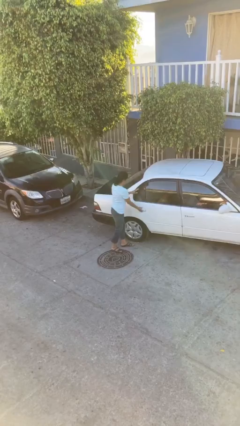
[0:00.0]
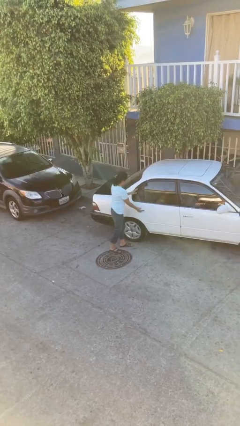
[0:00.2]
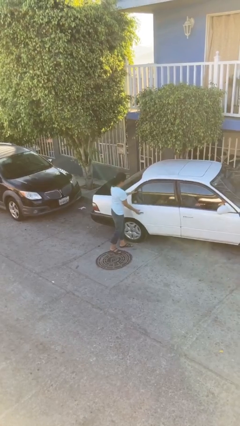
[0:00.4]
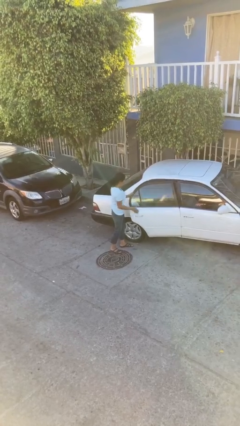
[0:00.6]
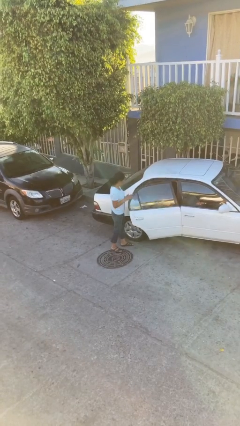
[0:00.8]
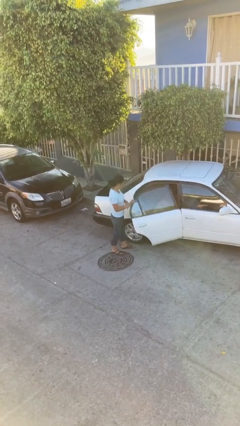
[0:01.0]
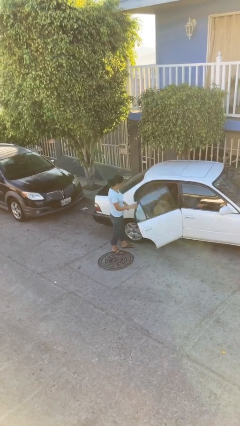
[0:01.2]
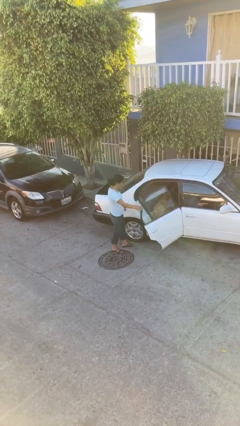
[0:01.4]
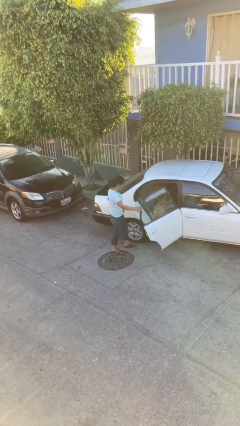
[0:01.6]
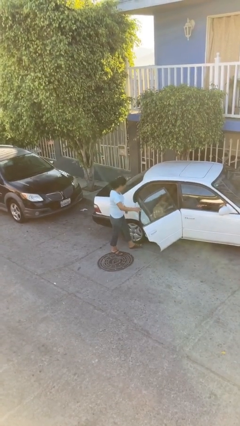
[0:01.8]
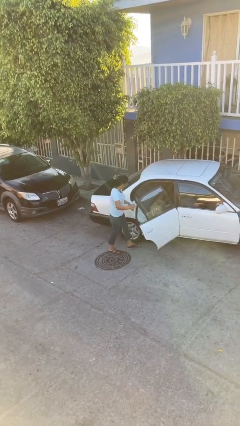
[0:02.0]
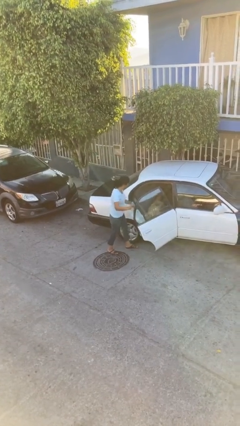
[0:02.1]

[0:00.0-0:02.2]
person opens car door

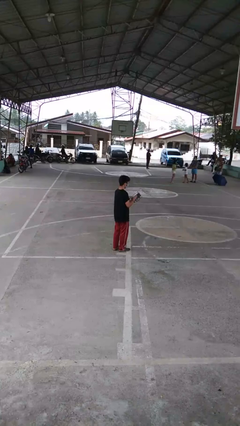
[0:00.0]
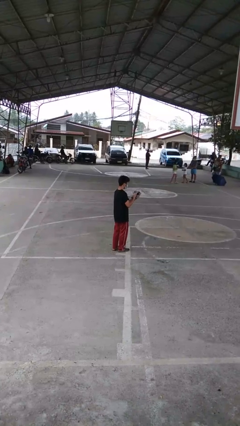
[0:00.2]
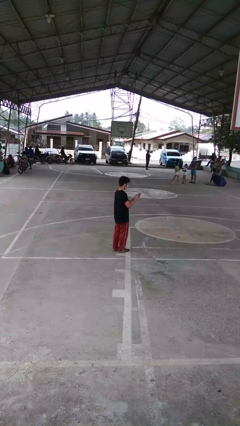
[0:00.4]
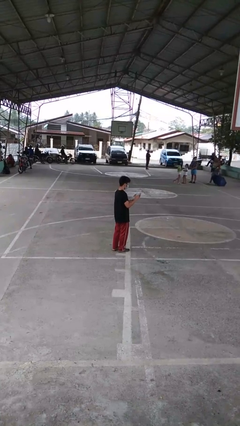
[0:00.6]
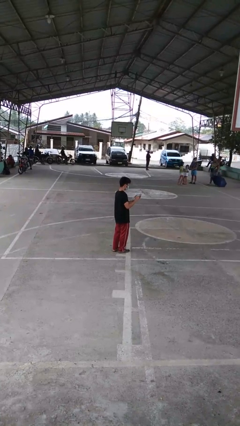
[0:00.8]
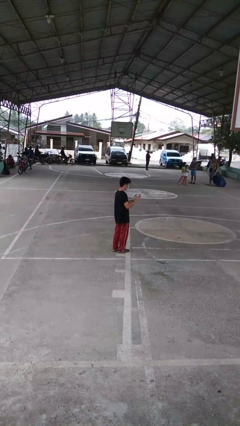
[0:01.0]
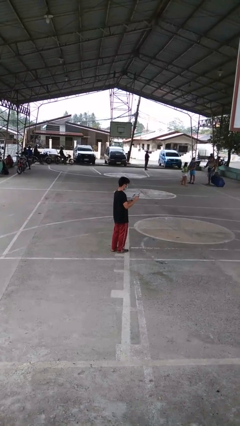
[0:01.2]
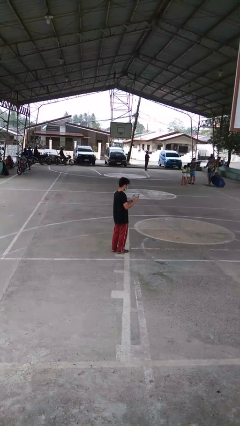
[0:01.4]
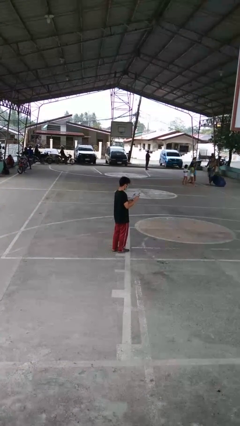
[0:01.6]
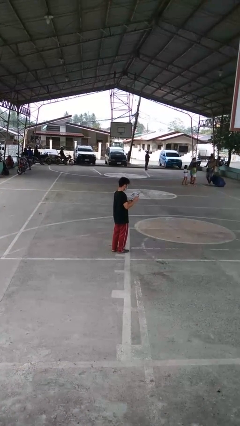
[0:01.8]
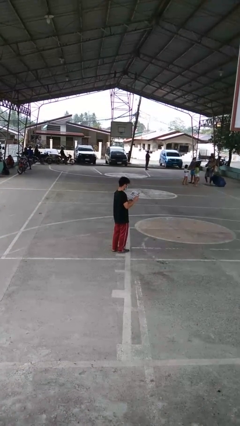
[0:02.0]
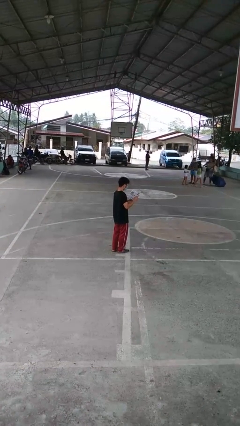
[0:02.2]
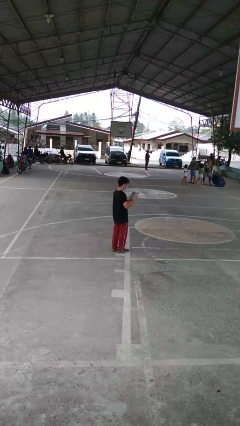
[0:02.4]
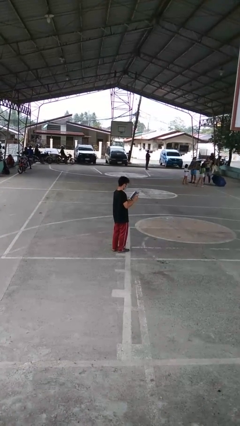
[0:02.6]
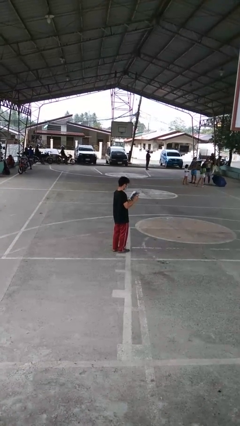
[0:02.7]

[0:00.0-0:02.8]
person reads magazine

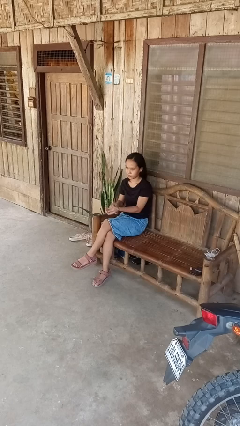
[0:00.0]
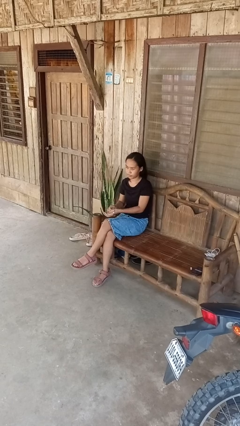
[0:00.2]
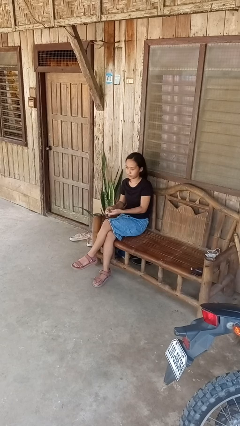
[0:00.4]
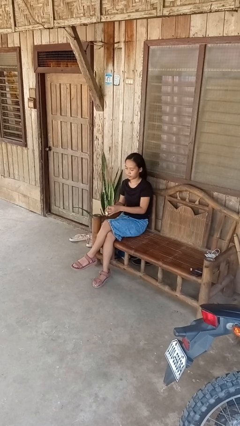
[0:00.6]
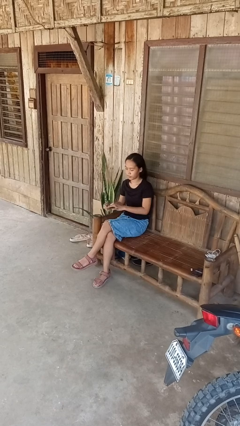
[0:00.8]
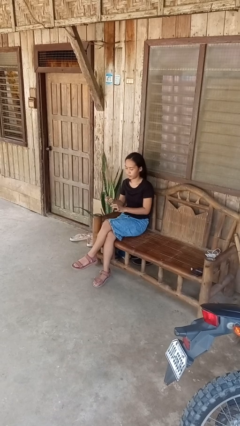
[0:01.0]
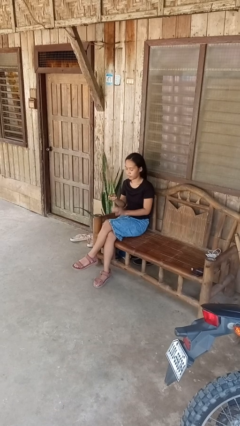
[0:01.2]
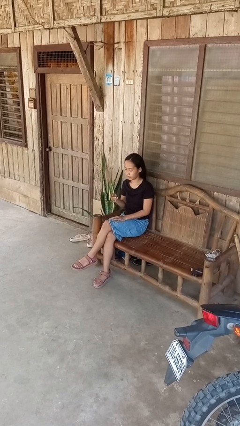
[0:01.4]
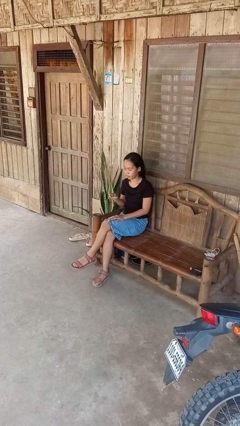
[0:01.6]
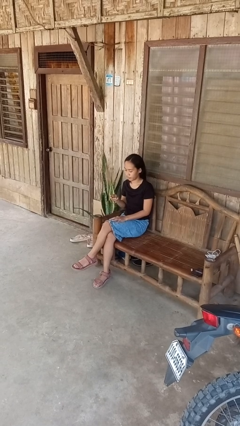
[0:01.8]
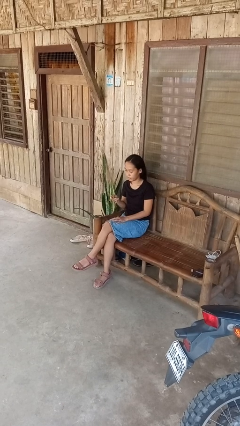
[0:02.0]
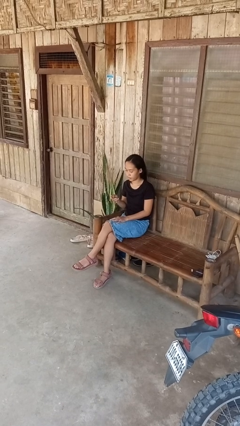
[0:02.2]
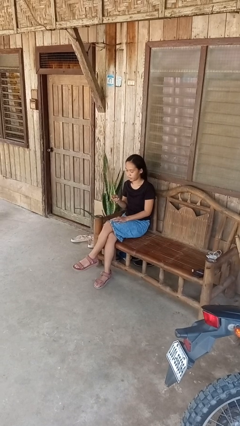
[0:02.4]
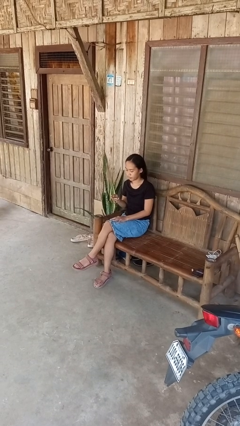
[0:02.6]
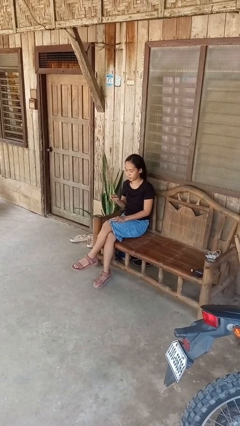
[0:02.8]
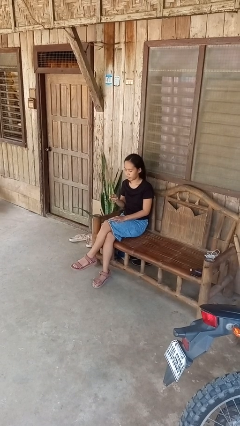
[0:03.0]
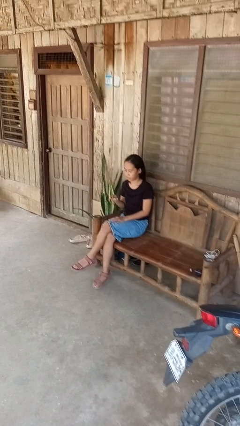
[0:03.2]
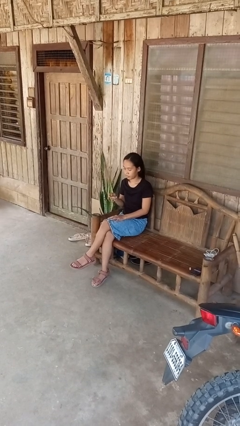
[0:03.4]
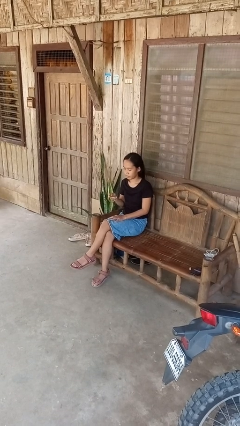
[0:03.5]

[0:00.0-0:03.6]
person takes off wristwatch

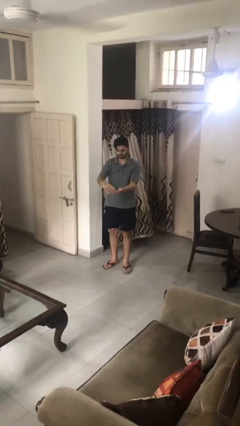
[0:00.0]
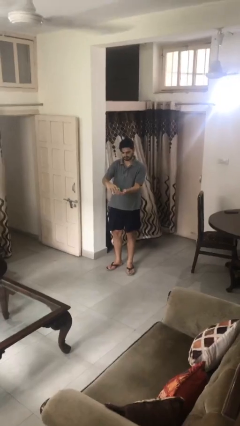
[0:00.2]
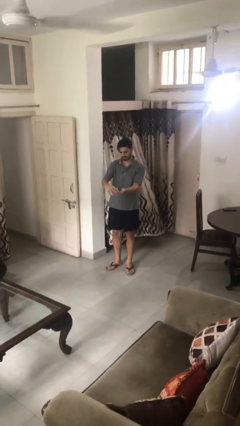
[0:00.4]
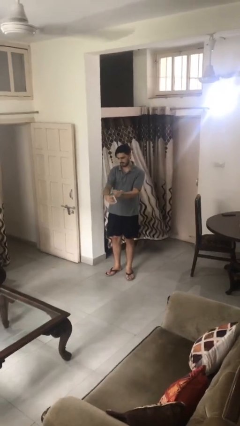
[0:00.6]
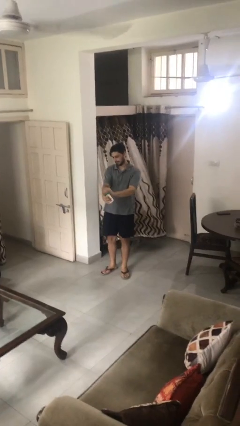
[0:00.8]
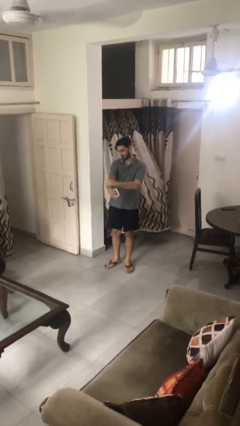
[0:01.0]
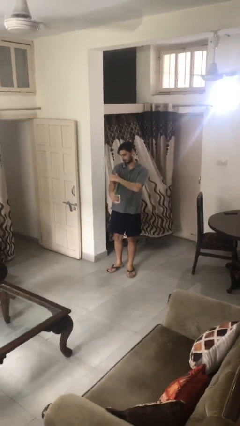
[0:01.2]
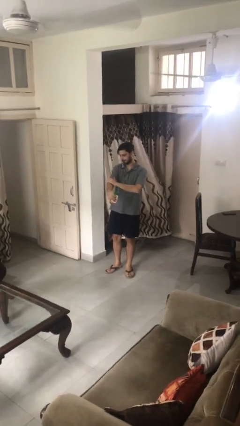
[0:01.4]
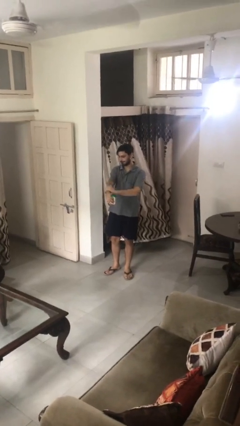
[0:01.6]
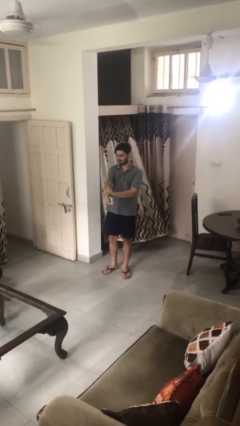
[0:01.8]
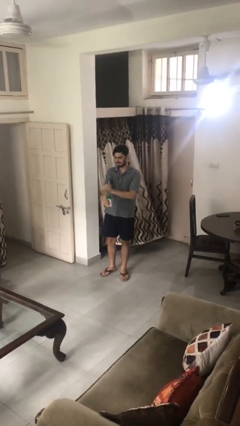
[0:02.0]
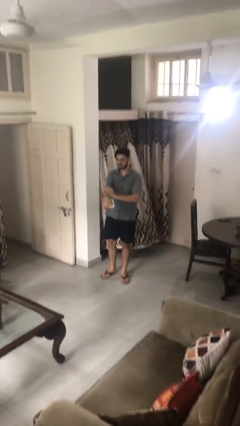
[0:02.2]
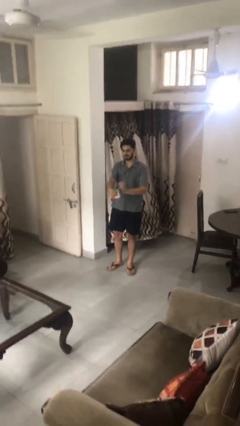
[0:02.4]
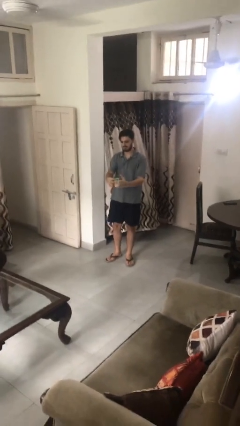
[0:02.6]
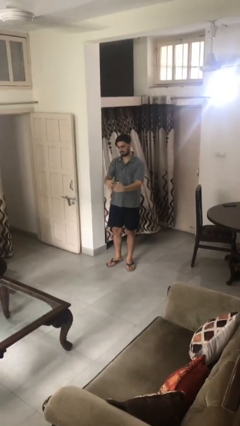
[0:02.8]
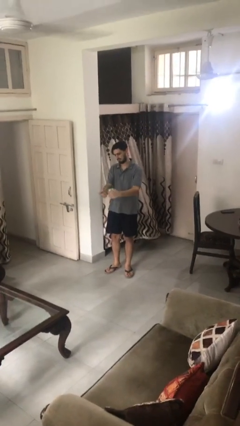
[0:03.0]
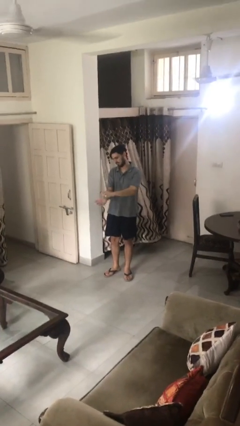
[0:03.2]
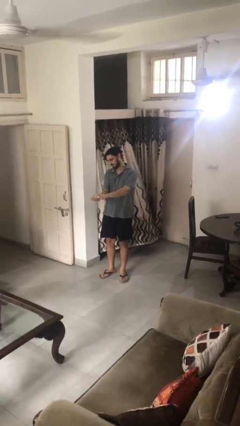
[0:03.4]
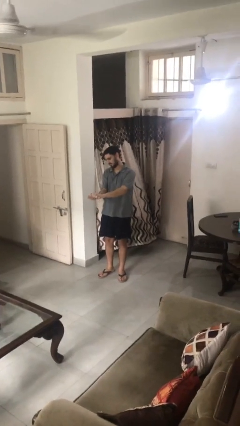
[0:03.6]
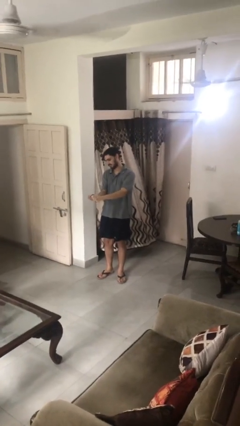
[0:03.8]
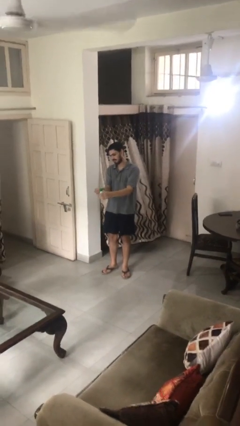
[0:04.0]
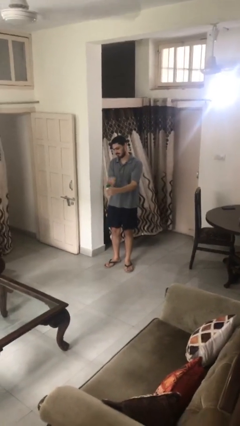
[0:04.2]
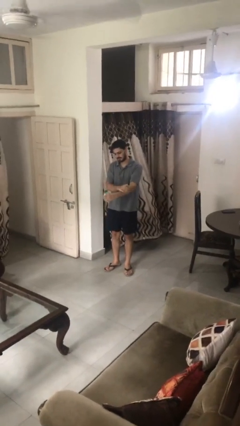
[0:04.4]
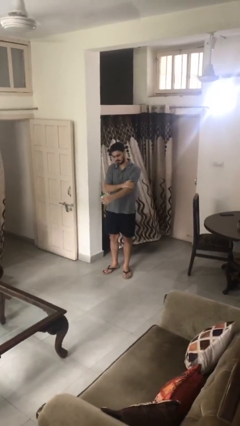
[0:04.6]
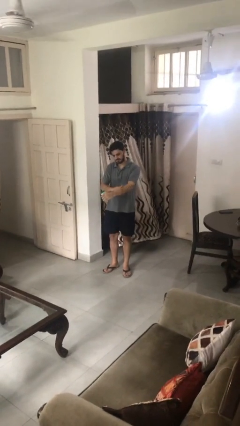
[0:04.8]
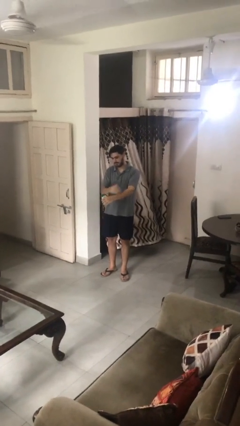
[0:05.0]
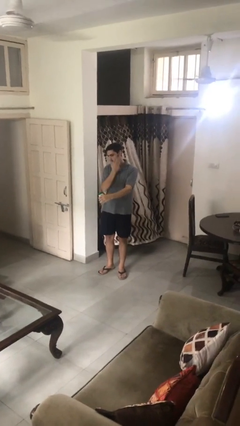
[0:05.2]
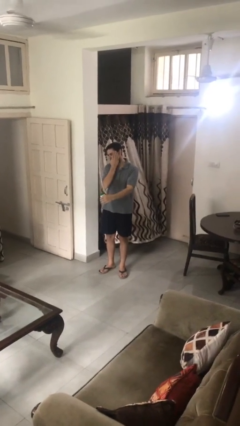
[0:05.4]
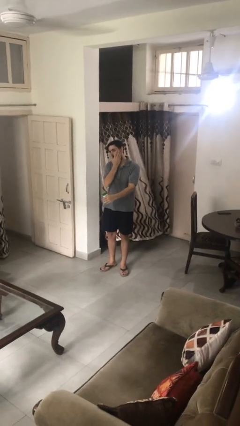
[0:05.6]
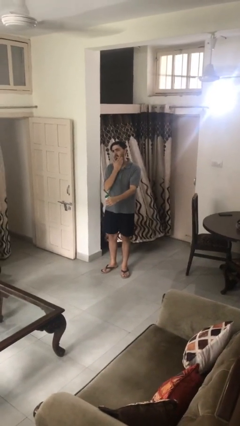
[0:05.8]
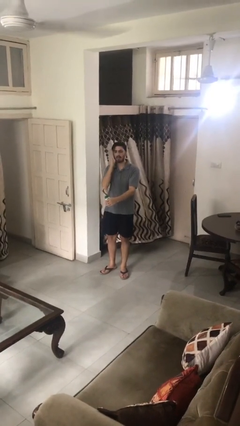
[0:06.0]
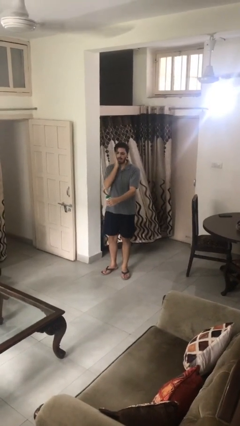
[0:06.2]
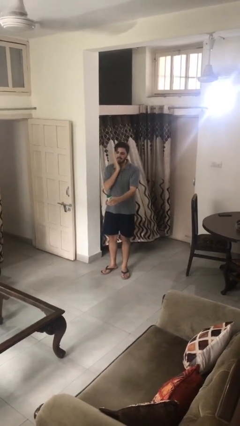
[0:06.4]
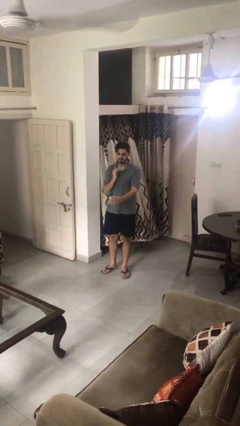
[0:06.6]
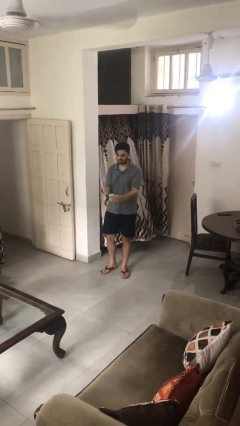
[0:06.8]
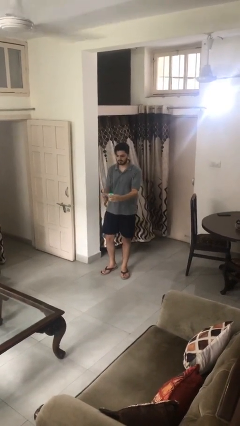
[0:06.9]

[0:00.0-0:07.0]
person applies sunscreen

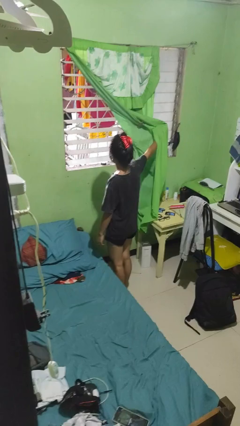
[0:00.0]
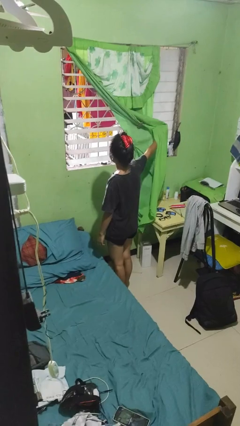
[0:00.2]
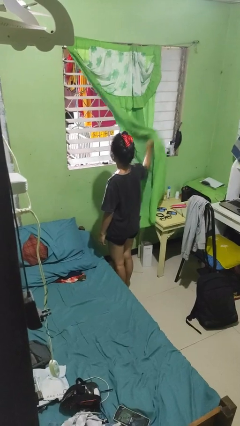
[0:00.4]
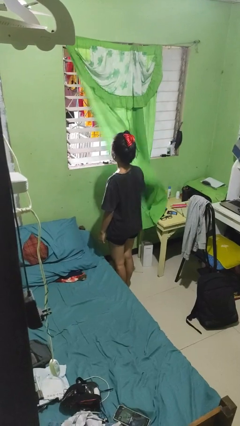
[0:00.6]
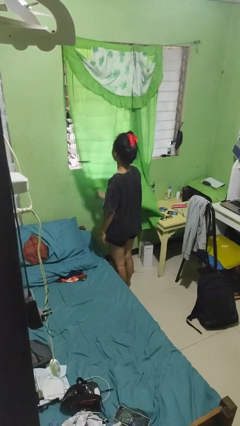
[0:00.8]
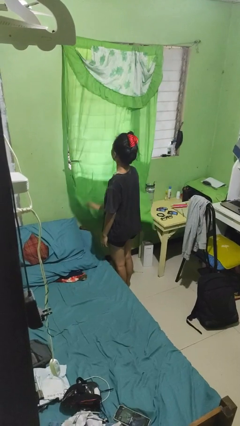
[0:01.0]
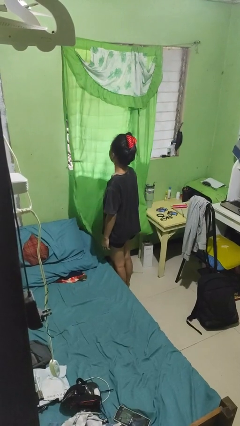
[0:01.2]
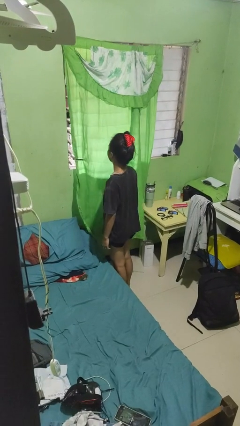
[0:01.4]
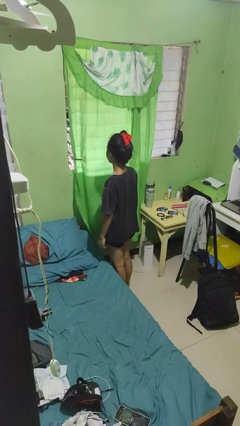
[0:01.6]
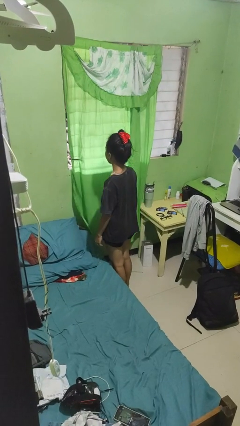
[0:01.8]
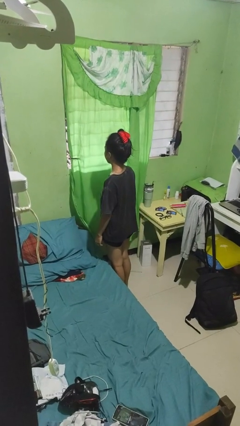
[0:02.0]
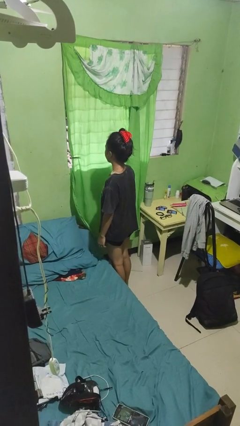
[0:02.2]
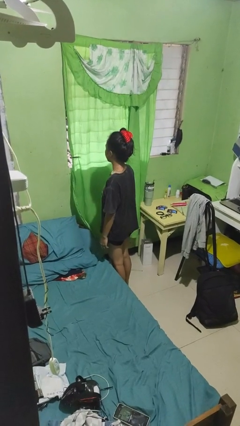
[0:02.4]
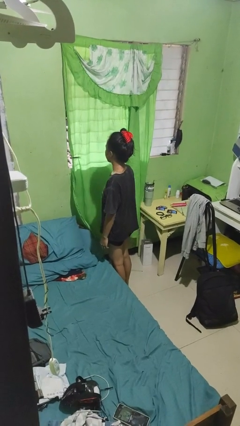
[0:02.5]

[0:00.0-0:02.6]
person closes curtains
